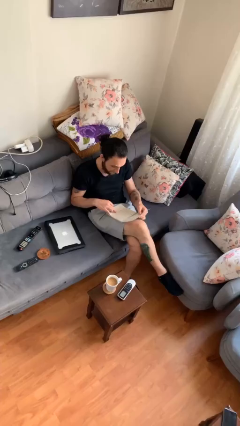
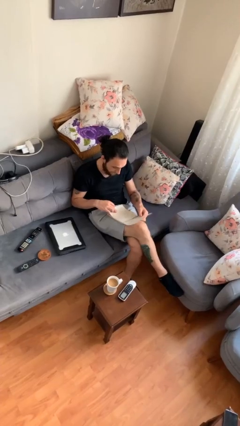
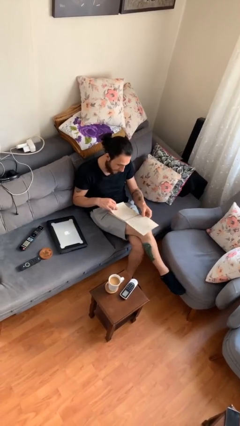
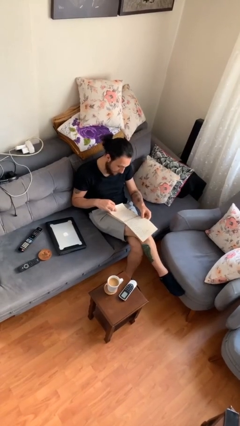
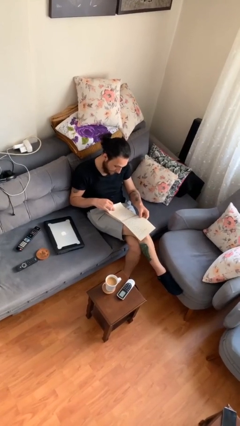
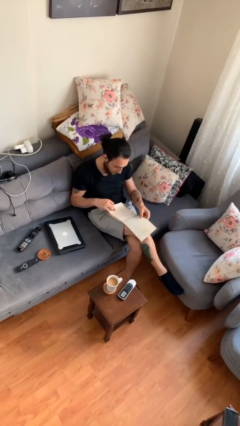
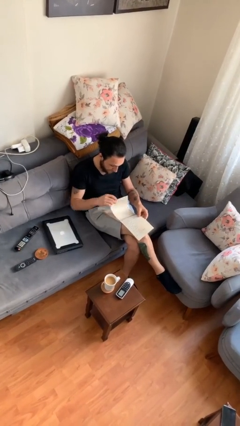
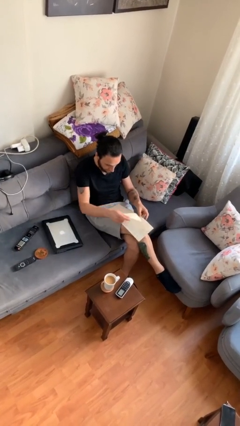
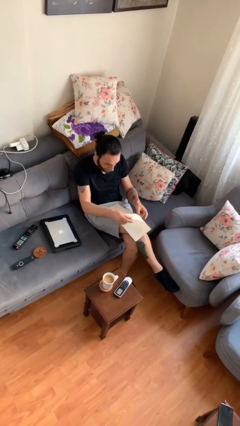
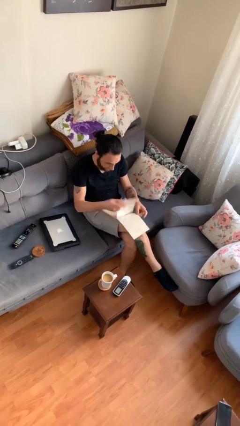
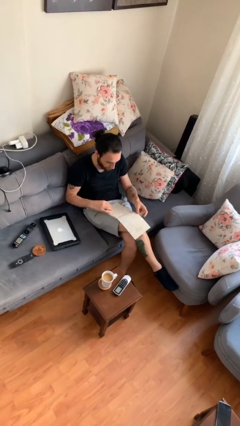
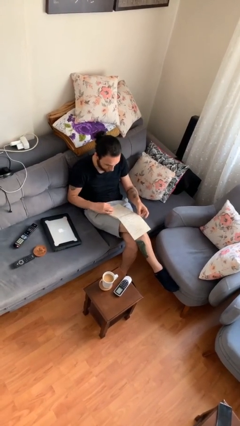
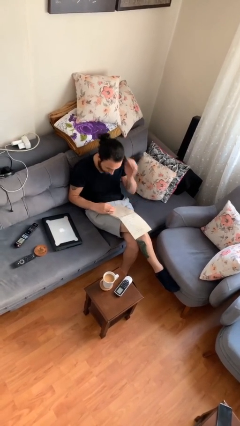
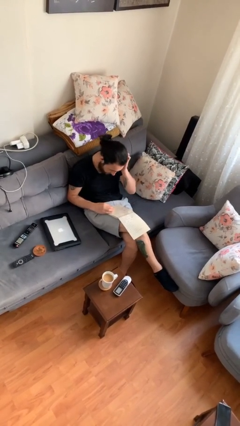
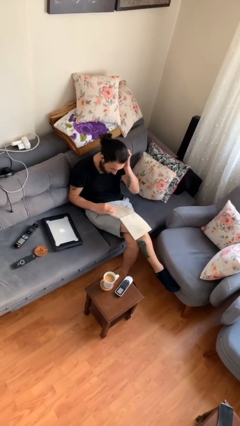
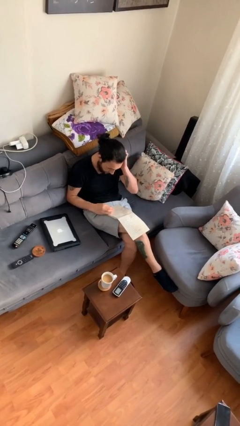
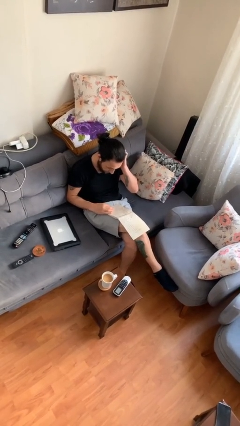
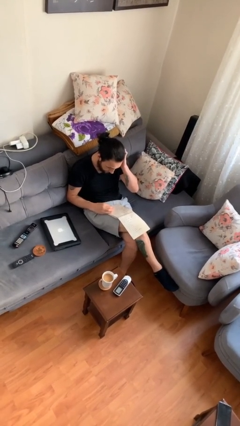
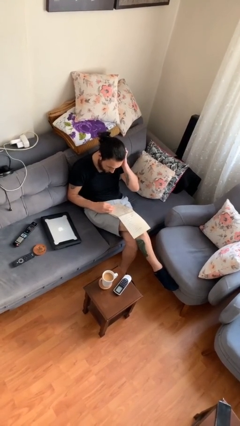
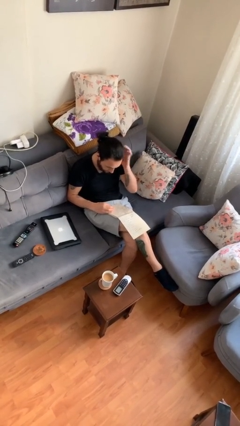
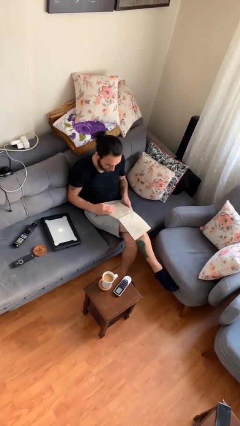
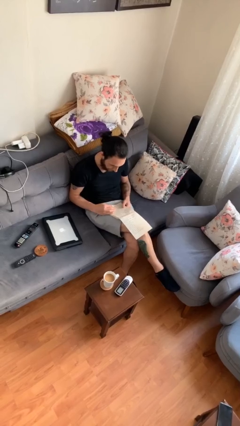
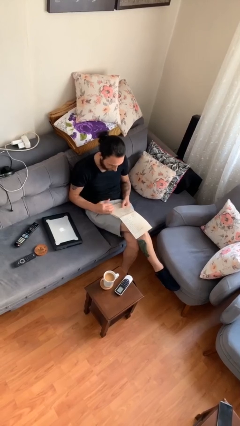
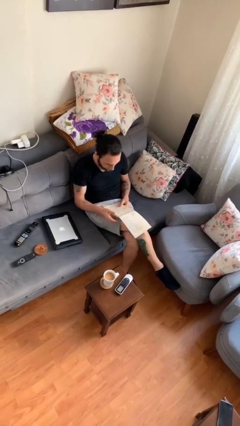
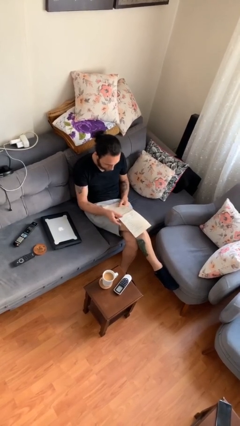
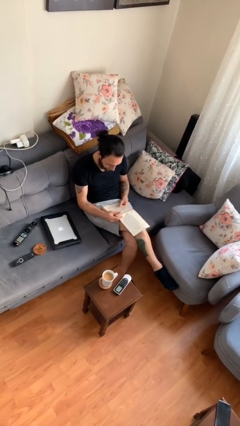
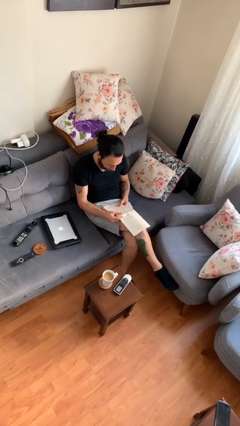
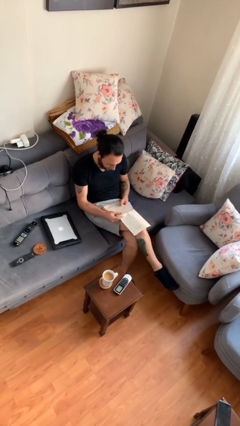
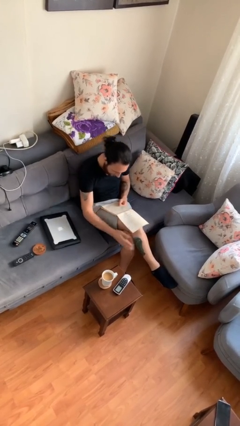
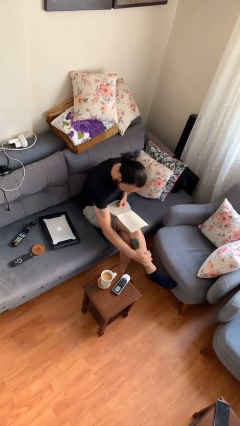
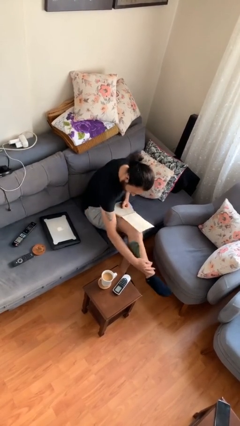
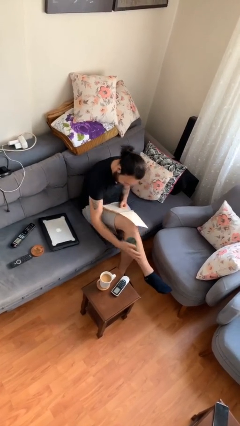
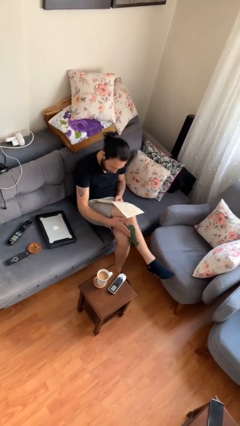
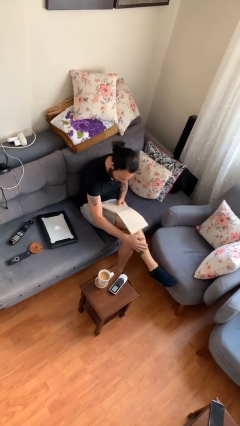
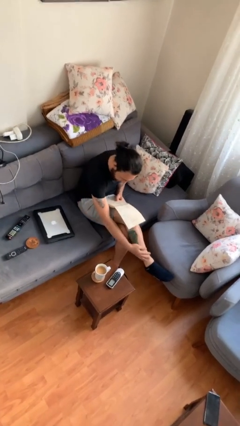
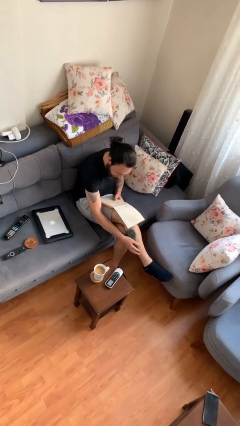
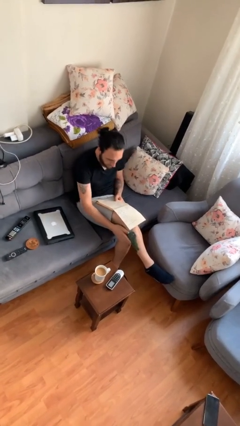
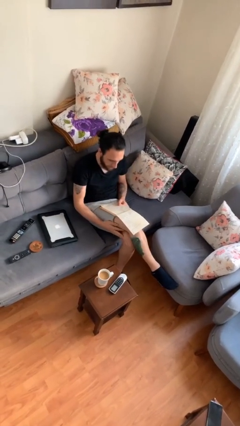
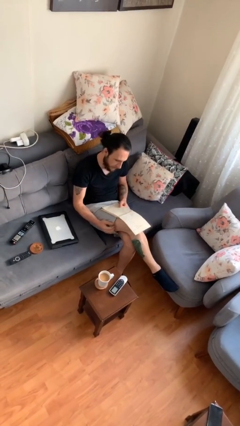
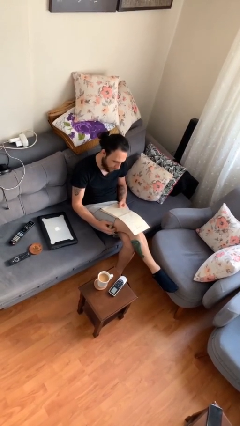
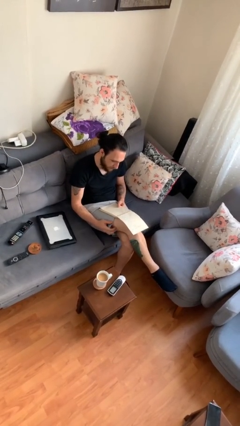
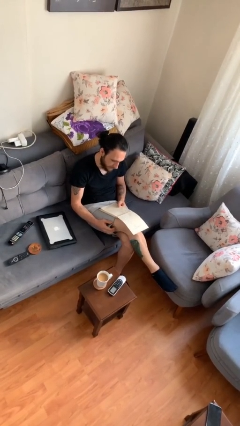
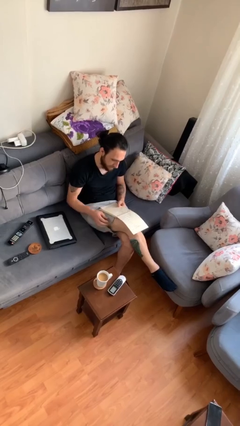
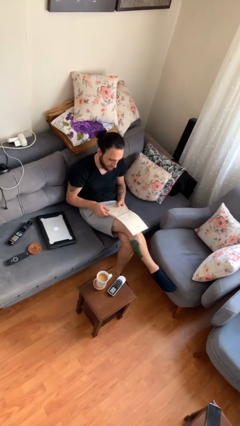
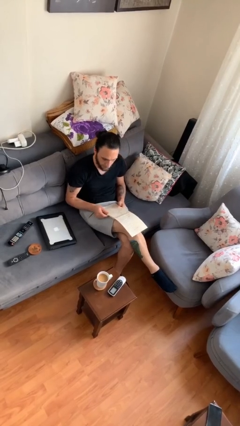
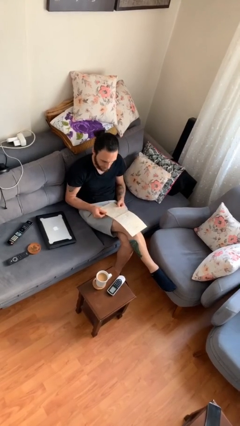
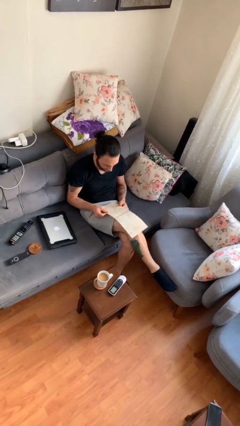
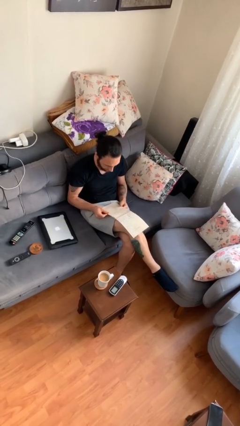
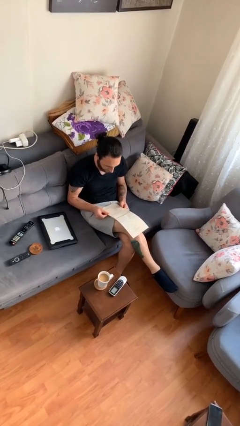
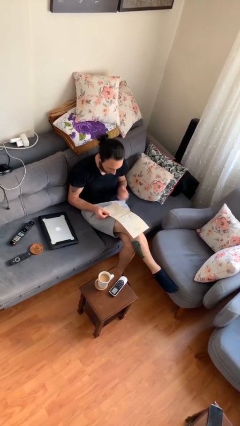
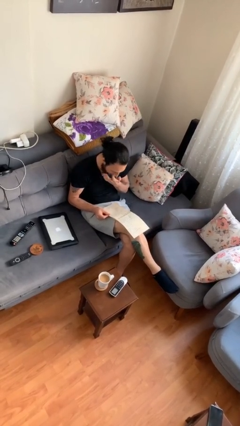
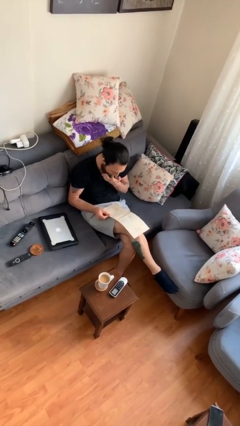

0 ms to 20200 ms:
person reads document

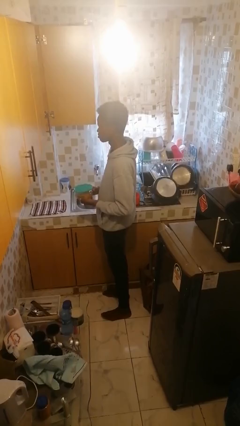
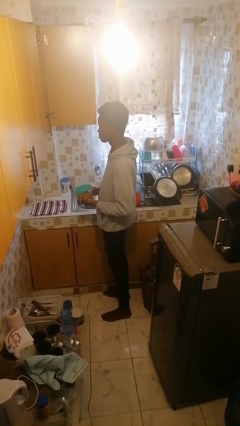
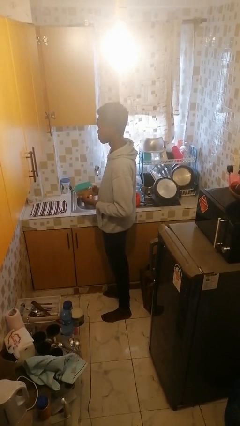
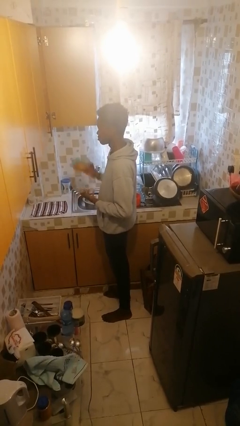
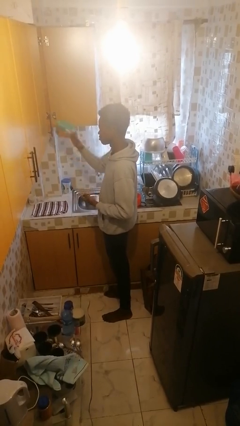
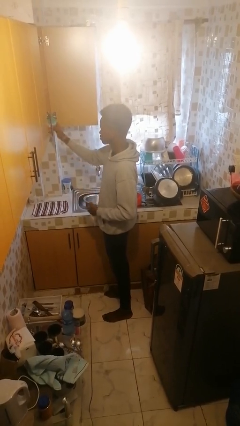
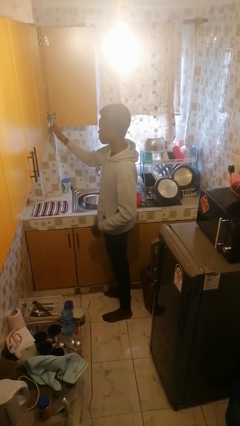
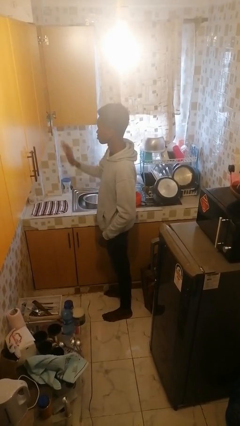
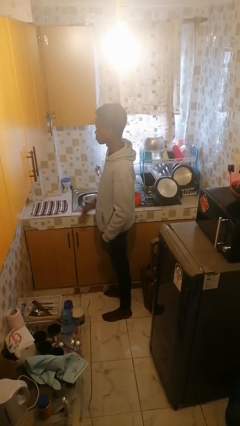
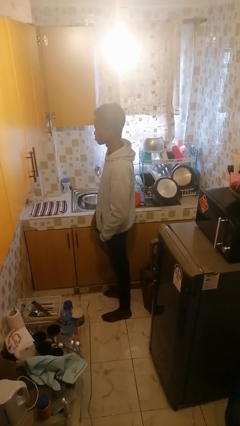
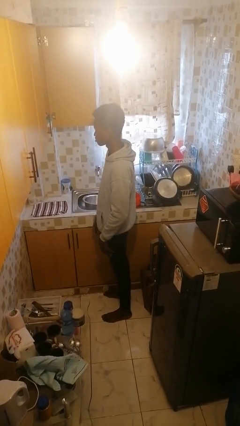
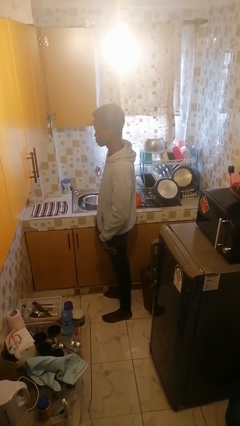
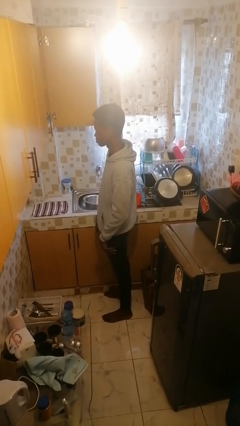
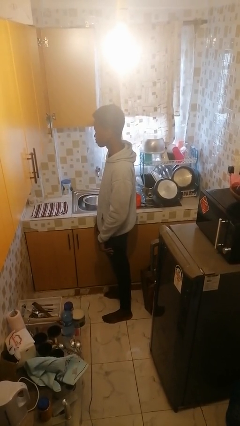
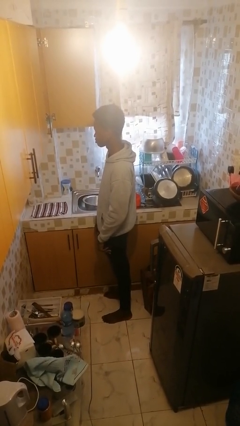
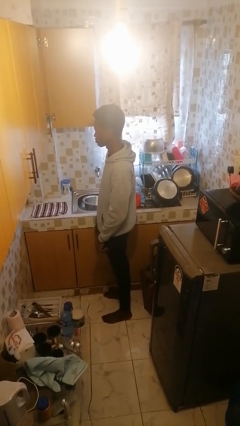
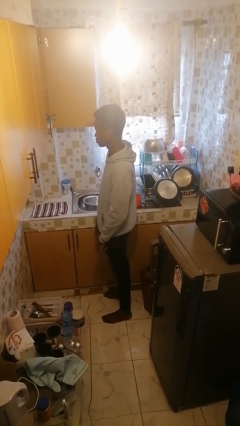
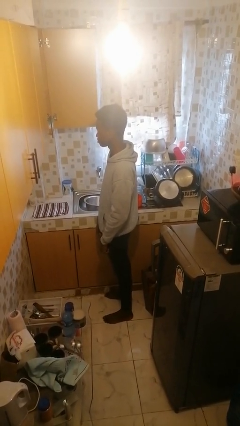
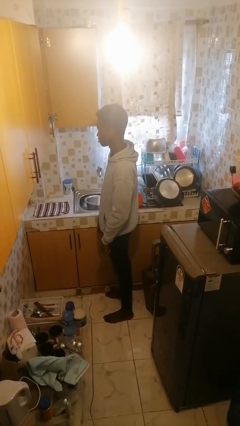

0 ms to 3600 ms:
person puts down object into cabinet

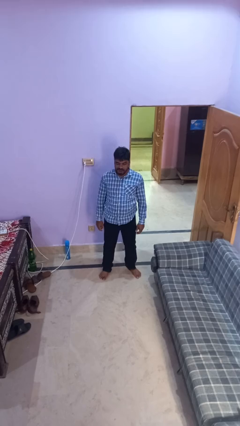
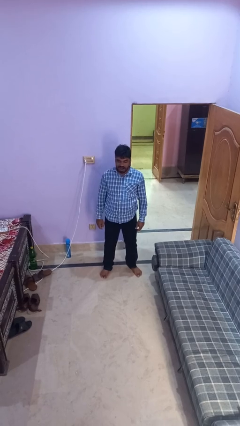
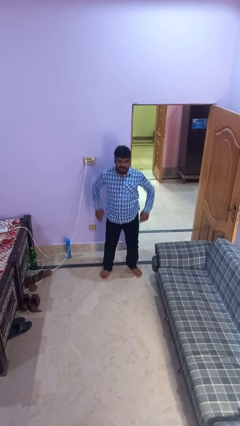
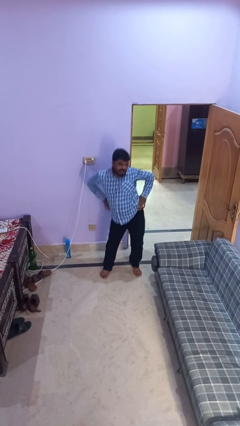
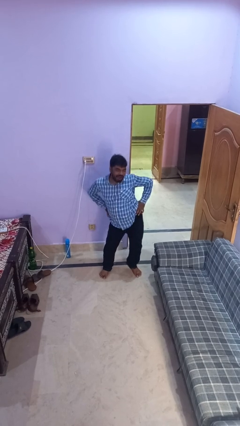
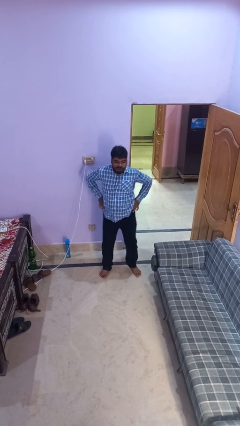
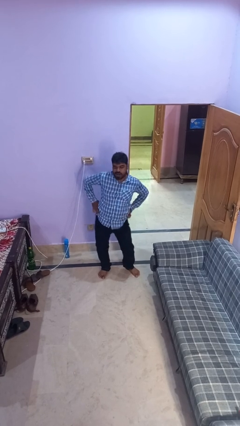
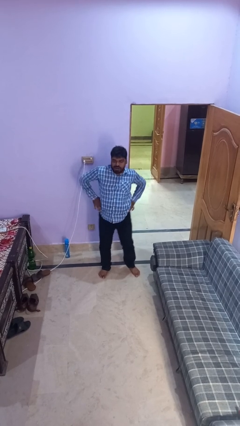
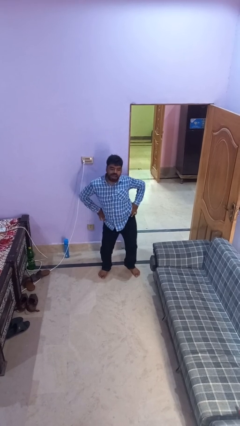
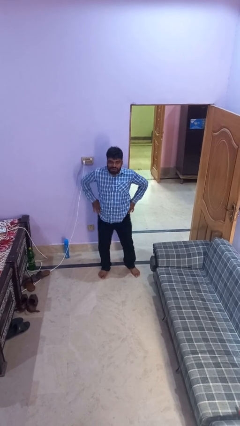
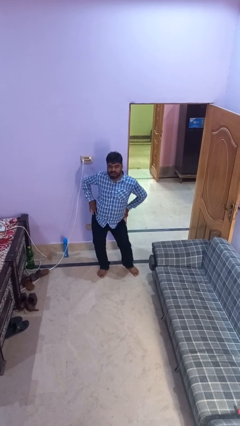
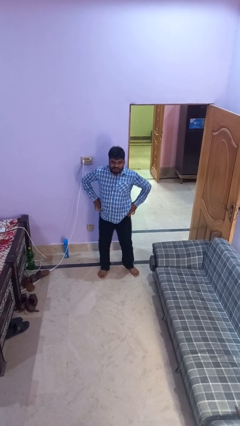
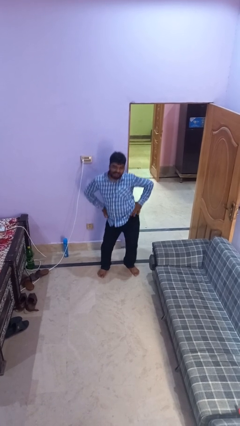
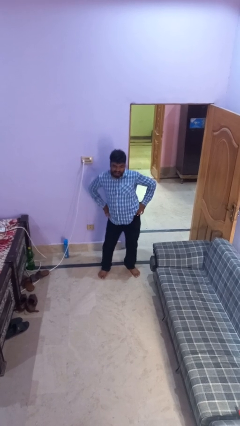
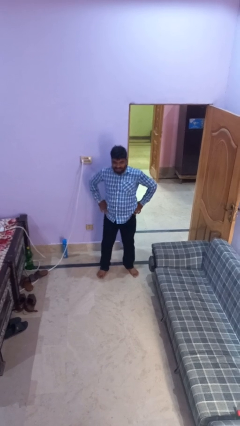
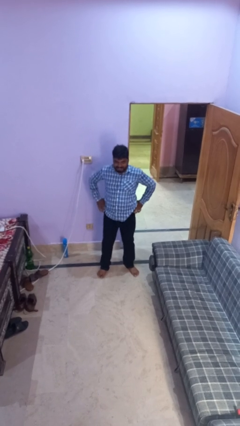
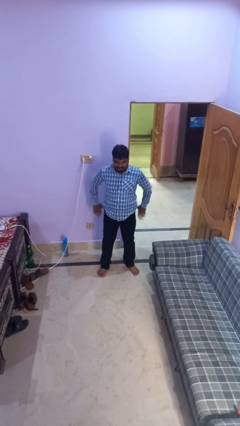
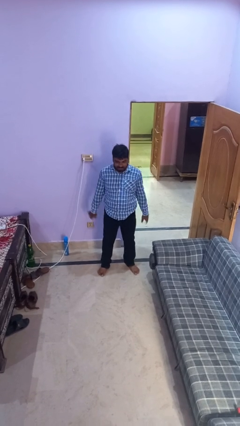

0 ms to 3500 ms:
person dances in place

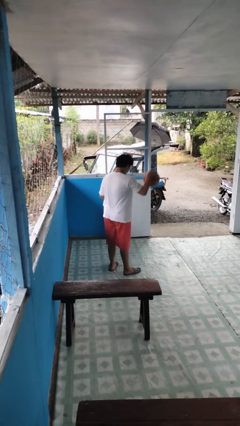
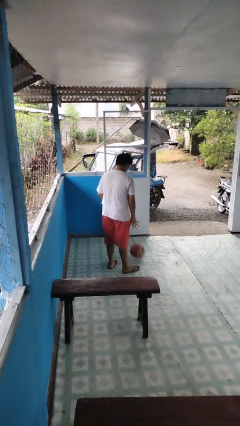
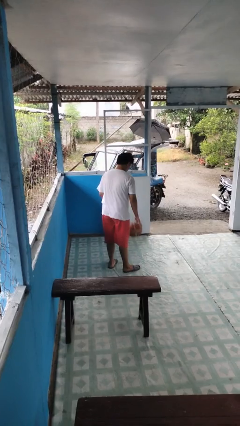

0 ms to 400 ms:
person bounces ball on floor
